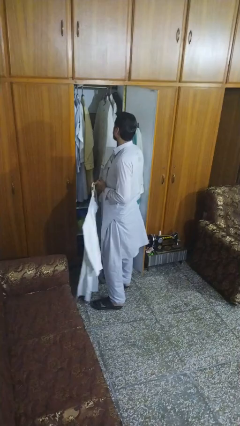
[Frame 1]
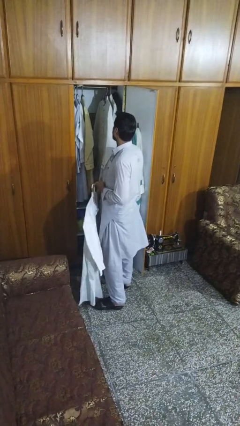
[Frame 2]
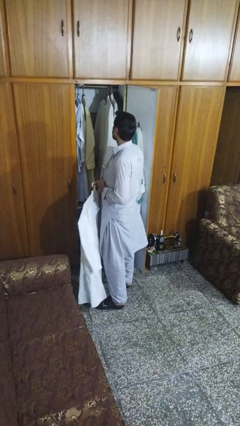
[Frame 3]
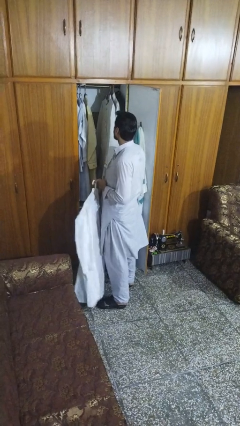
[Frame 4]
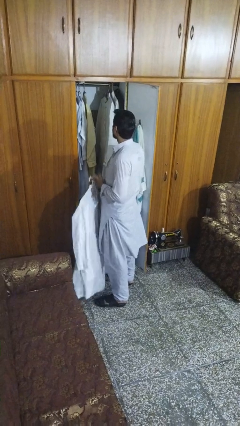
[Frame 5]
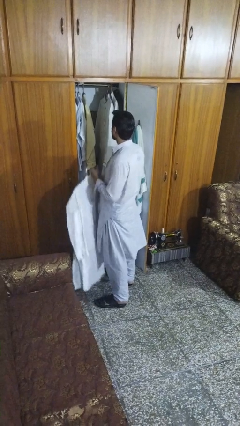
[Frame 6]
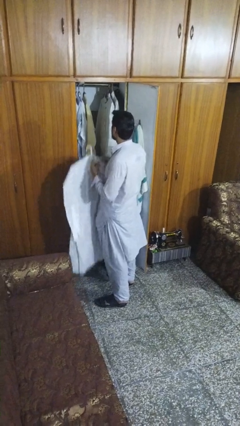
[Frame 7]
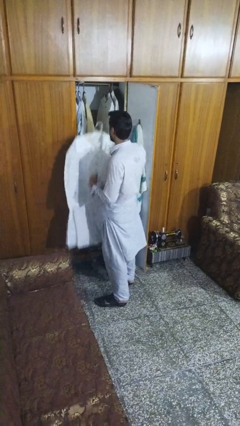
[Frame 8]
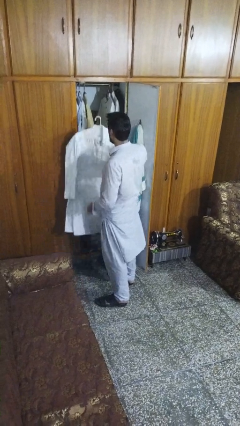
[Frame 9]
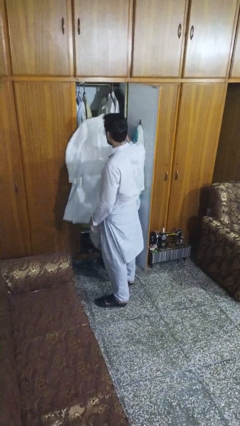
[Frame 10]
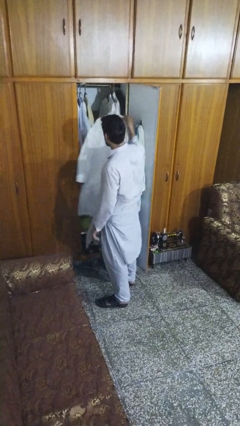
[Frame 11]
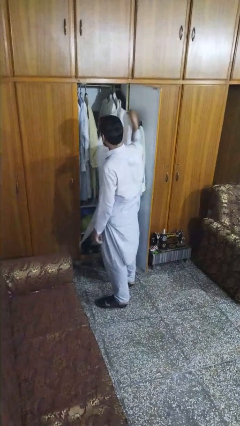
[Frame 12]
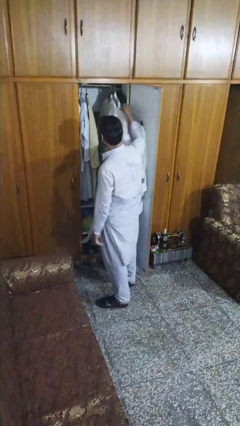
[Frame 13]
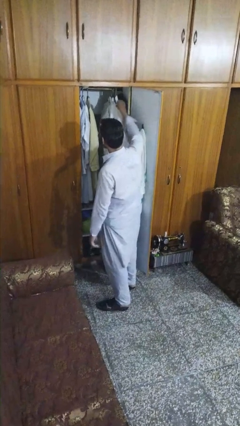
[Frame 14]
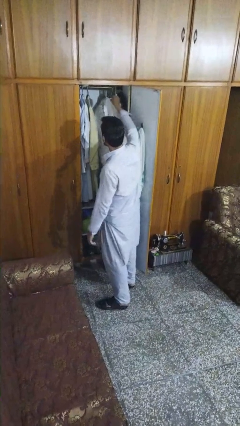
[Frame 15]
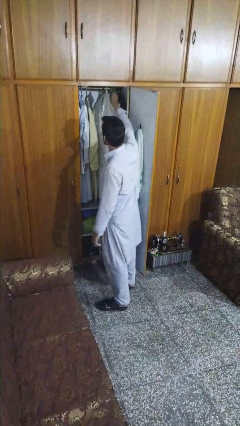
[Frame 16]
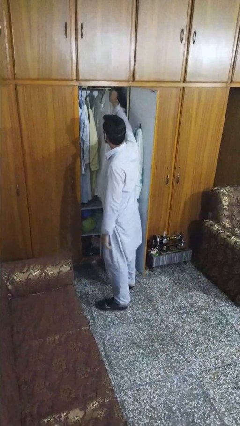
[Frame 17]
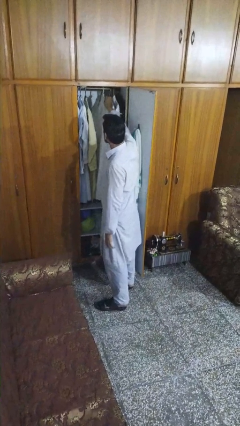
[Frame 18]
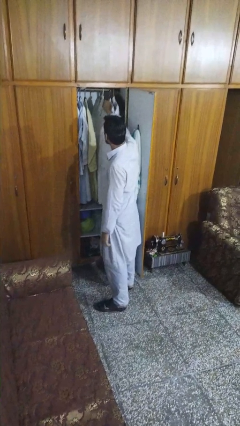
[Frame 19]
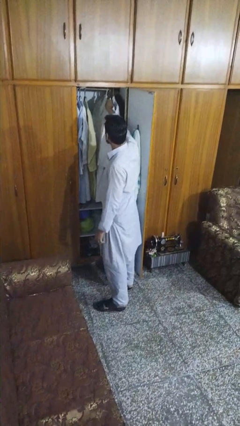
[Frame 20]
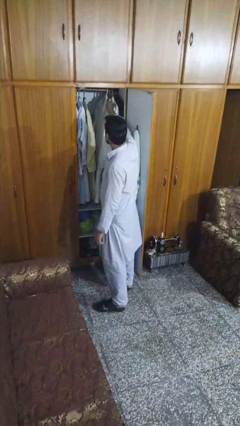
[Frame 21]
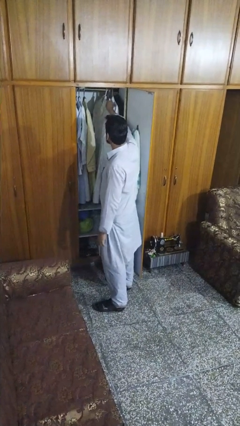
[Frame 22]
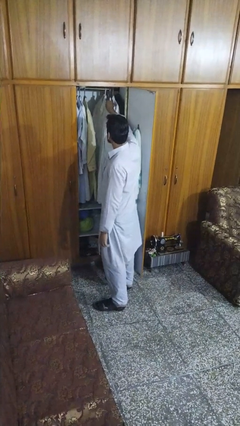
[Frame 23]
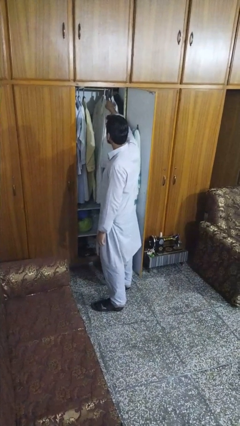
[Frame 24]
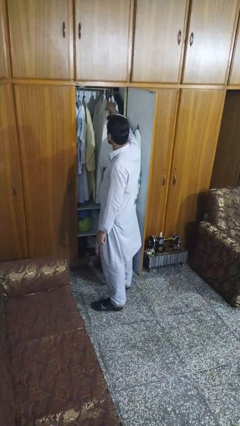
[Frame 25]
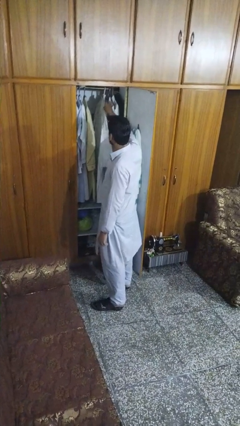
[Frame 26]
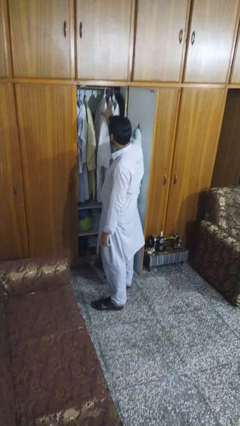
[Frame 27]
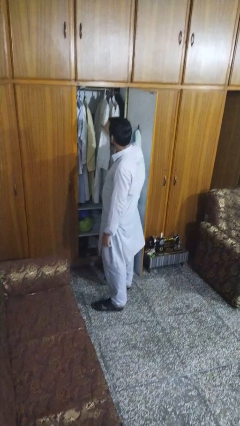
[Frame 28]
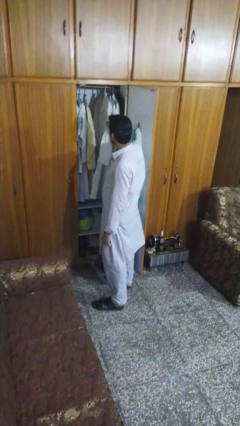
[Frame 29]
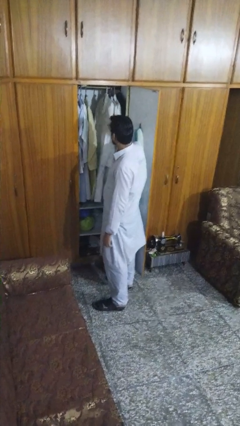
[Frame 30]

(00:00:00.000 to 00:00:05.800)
person puts clothes into dresser

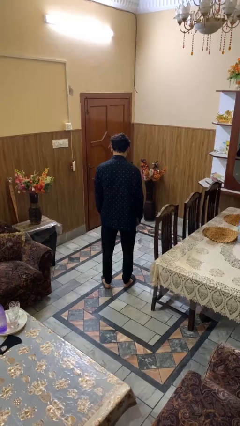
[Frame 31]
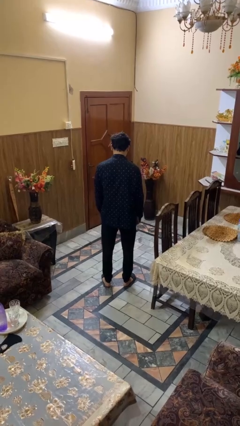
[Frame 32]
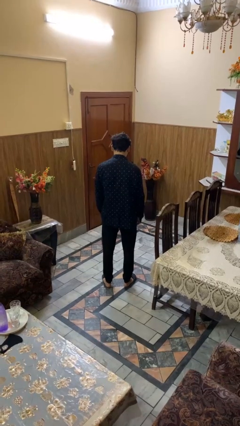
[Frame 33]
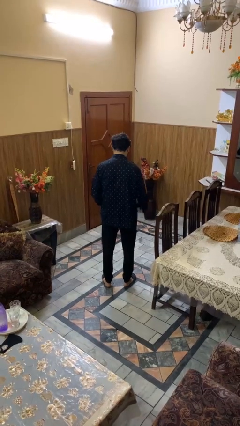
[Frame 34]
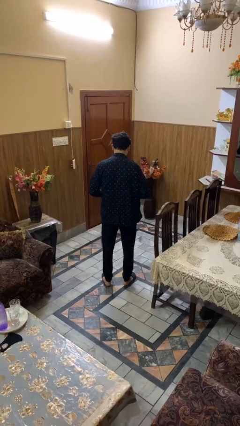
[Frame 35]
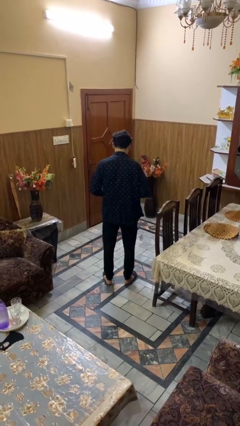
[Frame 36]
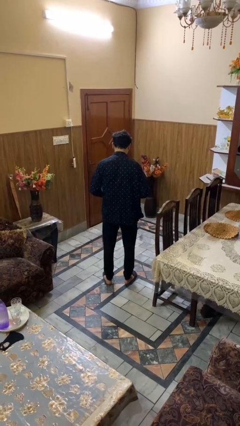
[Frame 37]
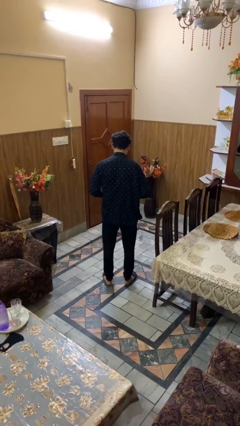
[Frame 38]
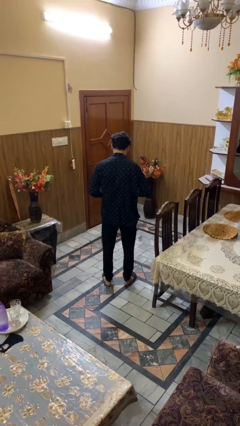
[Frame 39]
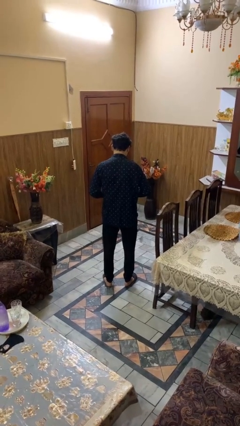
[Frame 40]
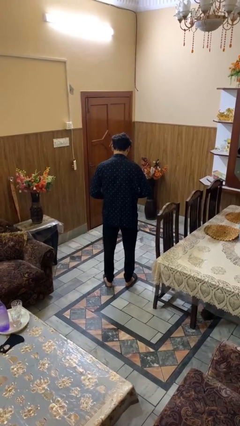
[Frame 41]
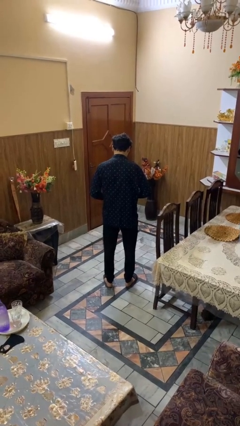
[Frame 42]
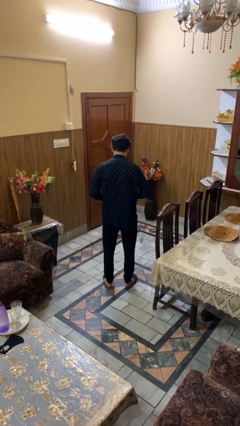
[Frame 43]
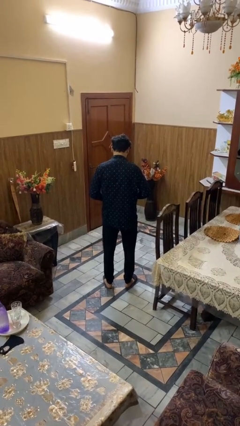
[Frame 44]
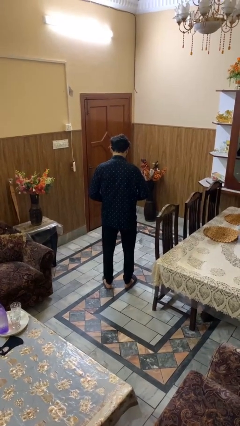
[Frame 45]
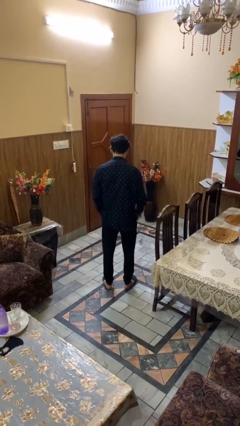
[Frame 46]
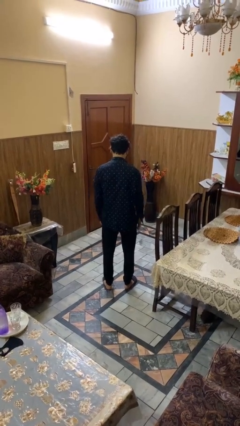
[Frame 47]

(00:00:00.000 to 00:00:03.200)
person buttons shirt

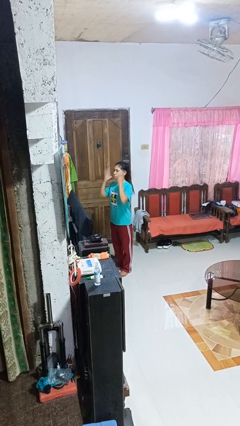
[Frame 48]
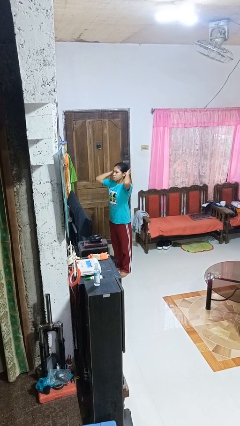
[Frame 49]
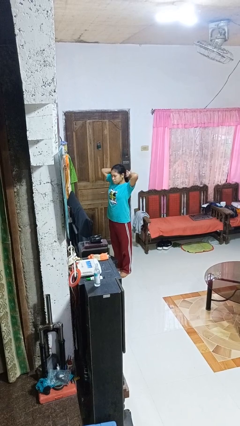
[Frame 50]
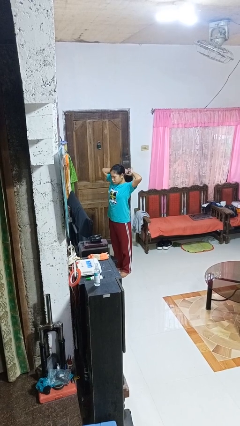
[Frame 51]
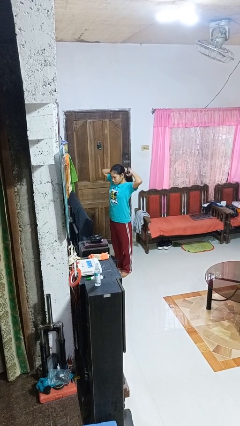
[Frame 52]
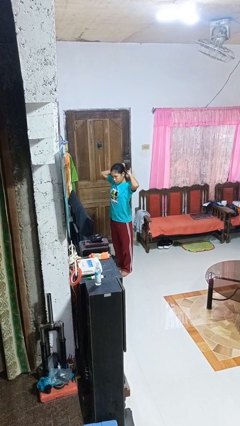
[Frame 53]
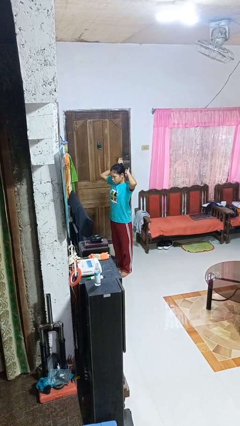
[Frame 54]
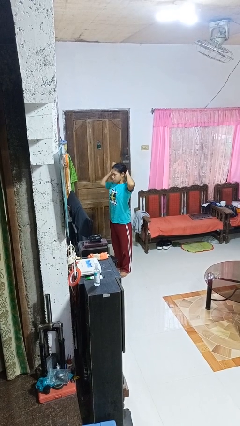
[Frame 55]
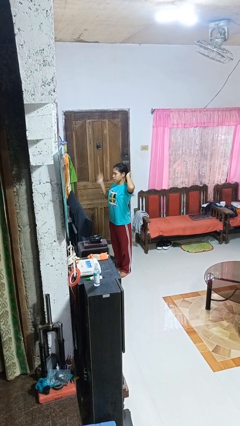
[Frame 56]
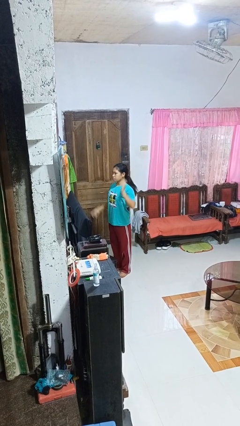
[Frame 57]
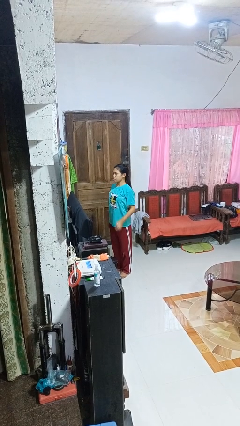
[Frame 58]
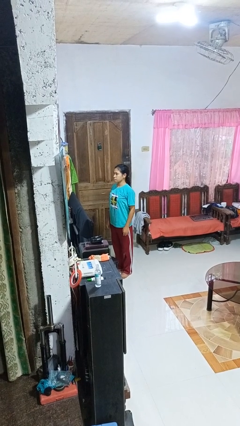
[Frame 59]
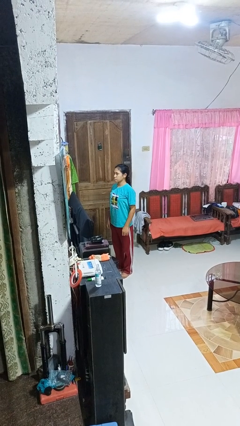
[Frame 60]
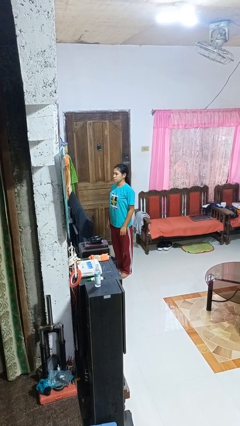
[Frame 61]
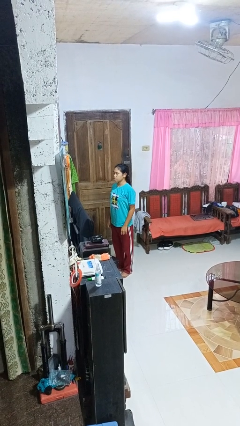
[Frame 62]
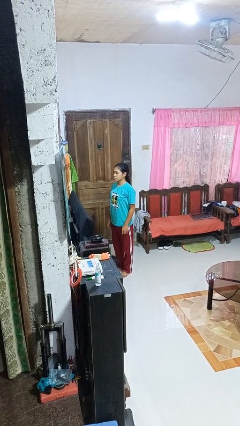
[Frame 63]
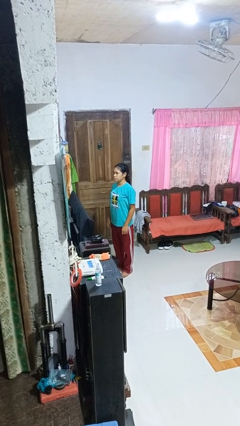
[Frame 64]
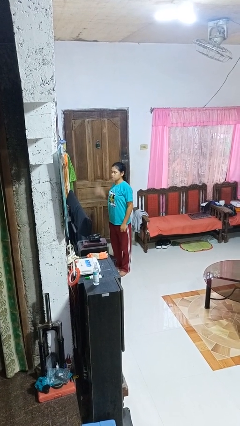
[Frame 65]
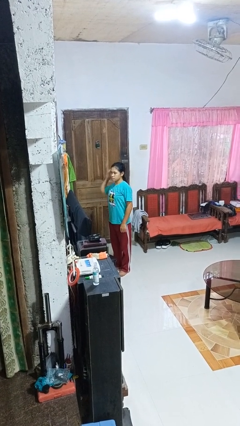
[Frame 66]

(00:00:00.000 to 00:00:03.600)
person puts hair in ponytail

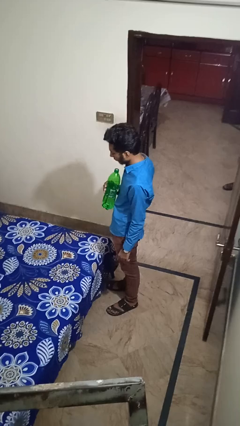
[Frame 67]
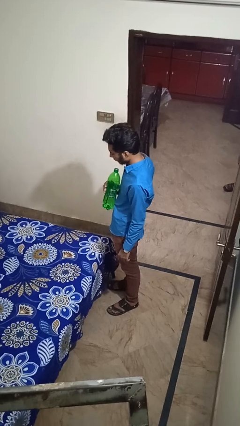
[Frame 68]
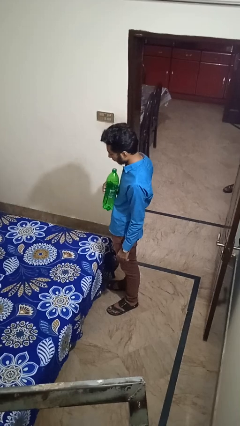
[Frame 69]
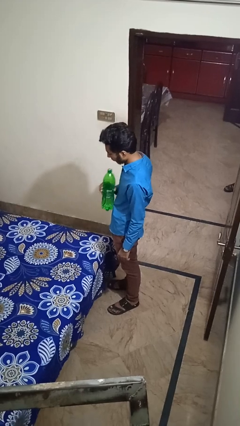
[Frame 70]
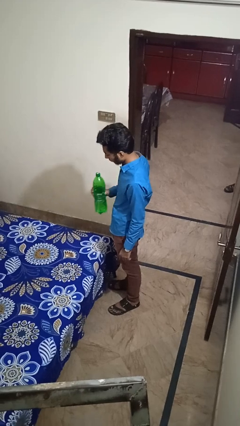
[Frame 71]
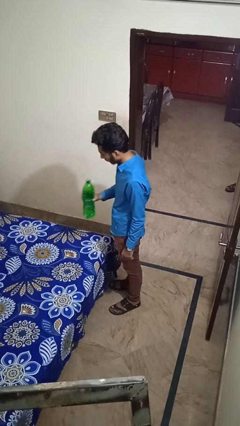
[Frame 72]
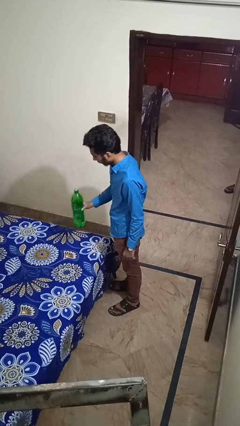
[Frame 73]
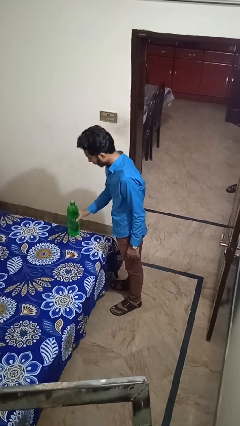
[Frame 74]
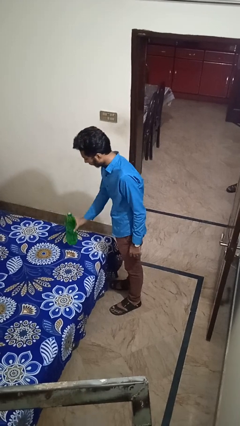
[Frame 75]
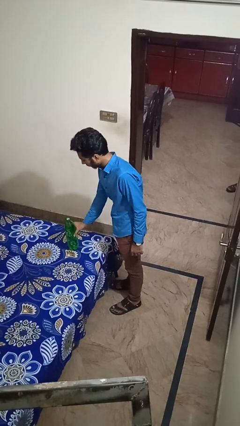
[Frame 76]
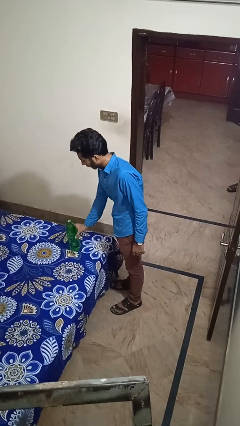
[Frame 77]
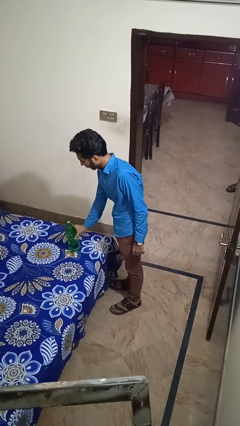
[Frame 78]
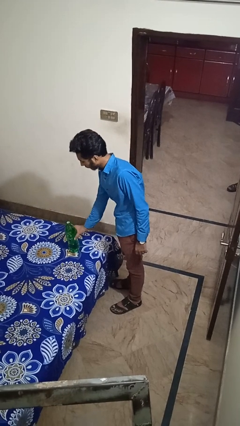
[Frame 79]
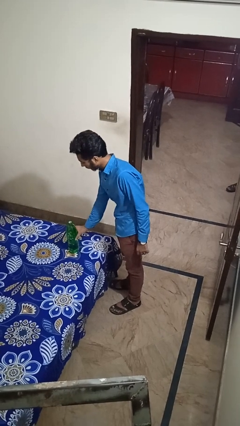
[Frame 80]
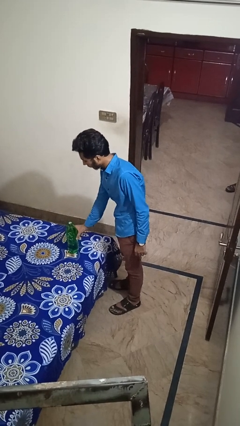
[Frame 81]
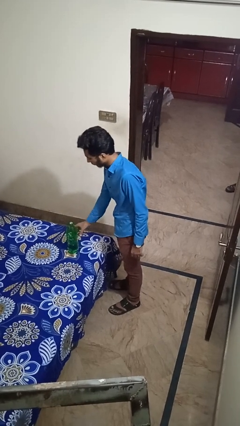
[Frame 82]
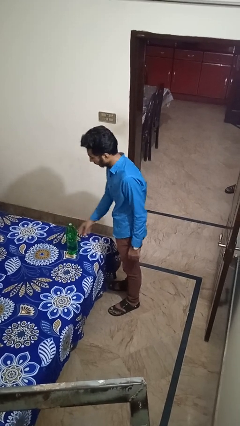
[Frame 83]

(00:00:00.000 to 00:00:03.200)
person puts down object on bed

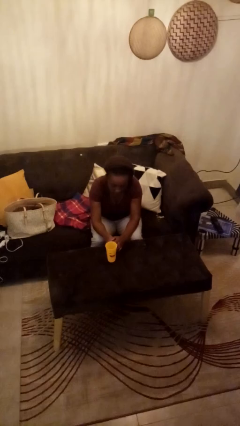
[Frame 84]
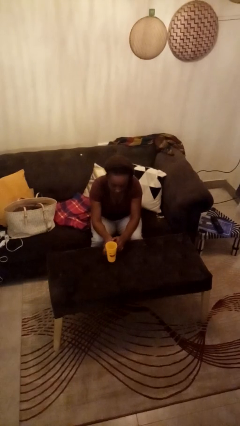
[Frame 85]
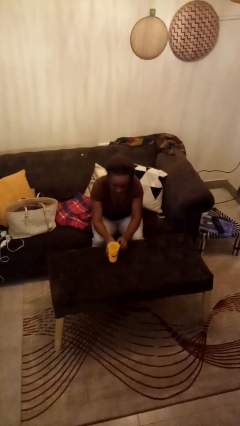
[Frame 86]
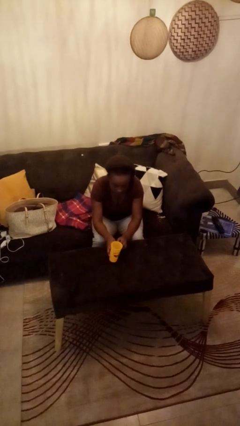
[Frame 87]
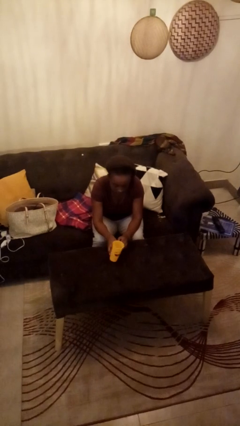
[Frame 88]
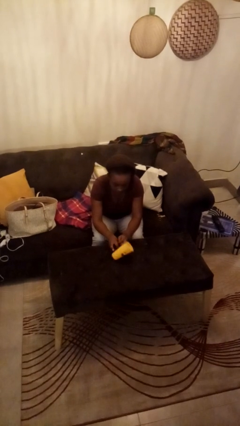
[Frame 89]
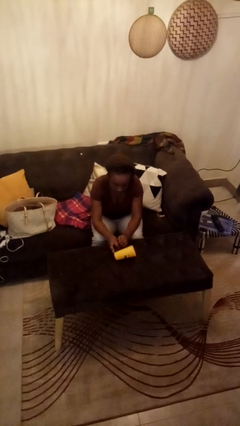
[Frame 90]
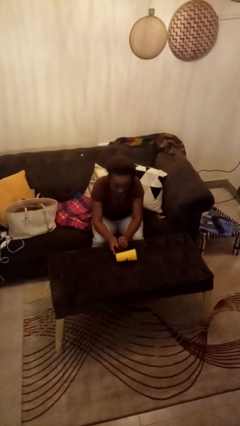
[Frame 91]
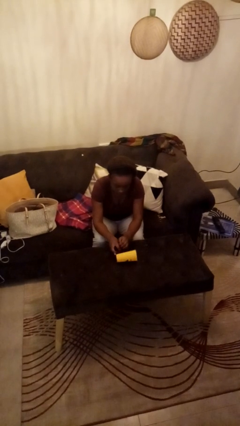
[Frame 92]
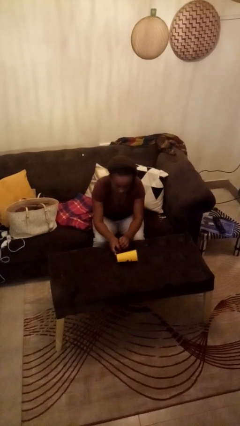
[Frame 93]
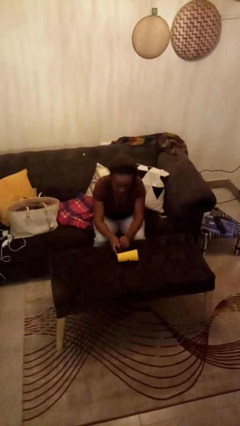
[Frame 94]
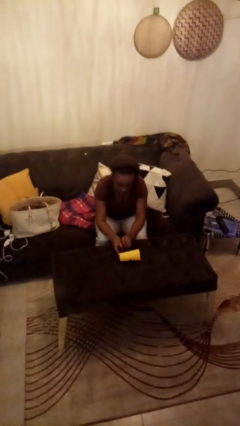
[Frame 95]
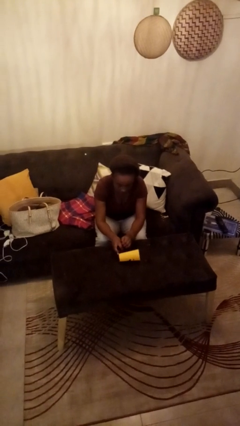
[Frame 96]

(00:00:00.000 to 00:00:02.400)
person knocks over glass
